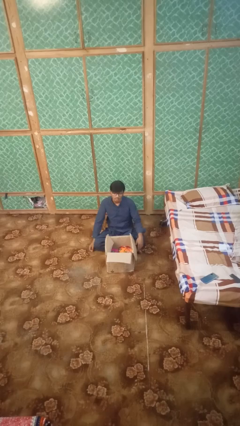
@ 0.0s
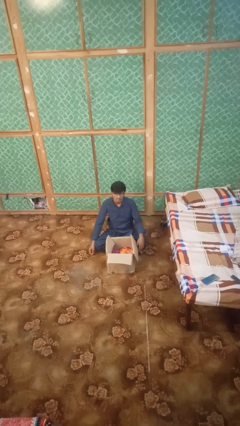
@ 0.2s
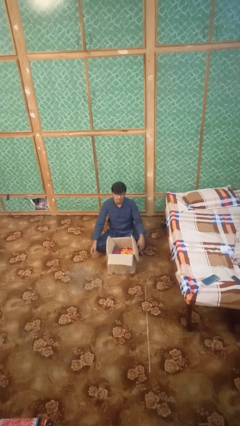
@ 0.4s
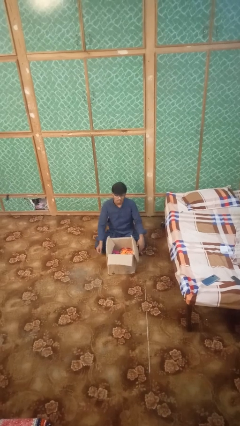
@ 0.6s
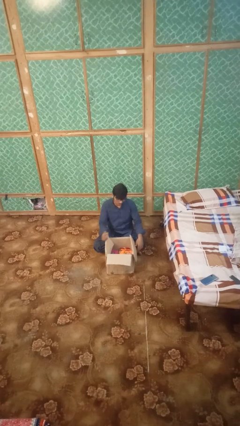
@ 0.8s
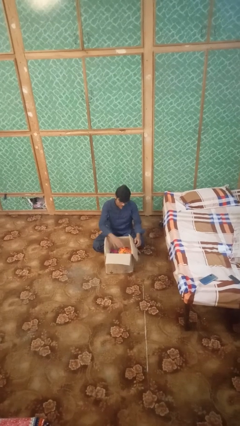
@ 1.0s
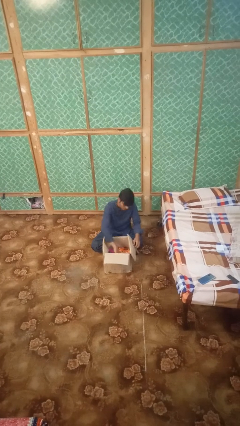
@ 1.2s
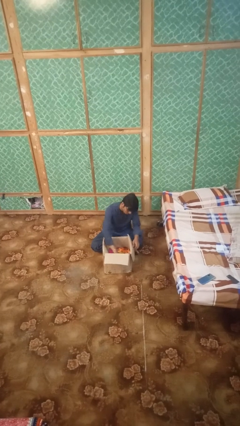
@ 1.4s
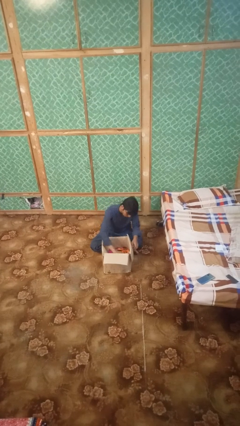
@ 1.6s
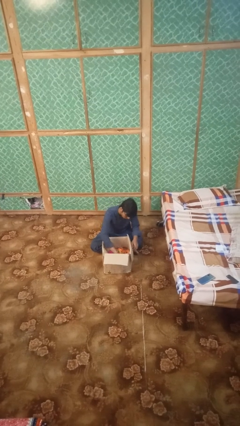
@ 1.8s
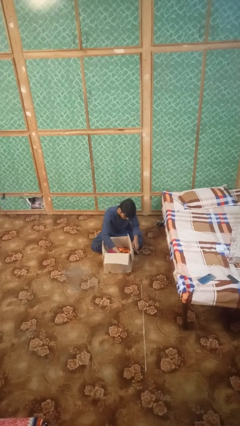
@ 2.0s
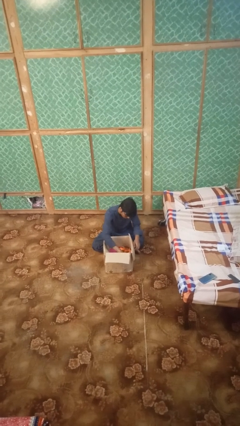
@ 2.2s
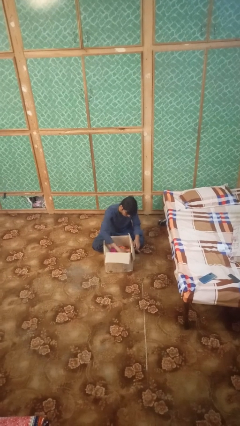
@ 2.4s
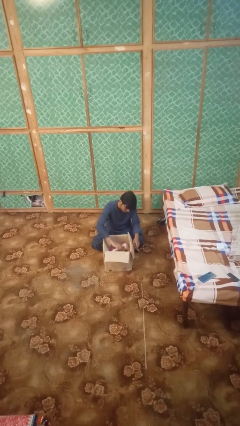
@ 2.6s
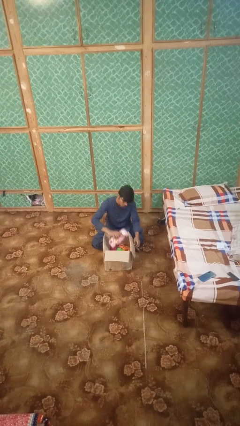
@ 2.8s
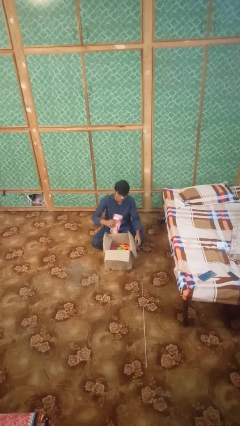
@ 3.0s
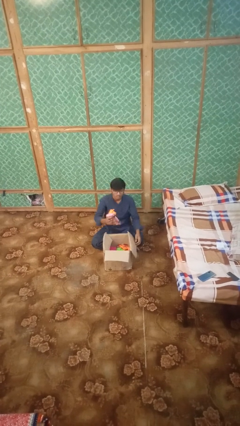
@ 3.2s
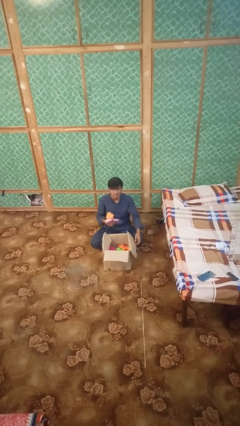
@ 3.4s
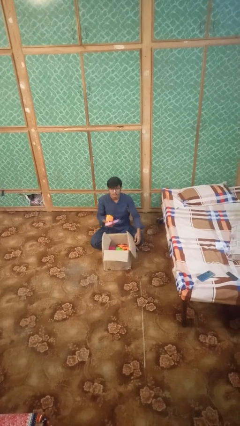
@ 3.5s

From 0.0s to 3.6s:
person takes object from box

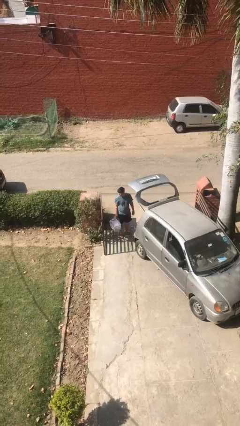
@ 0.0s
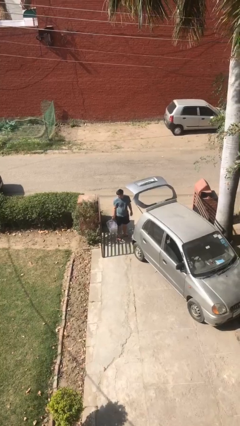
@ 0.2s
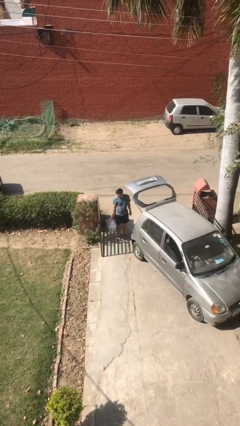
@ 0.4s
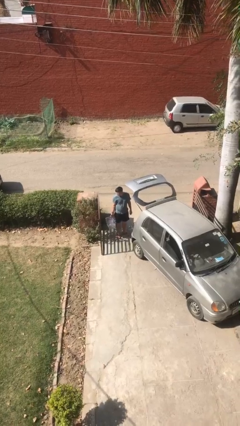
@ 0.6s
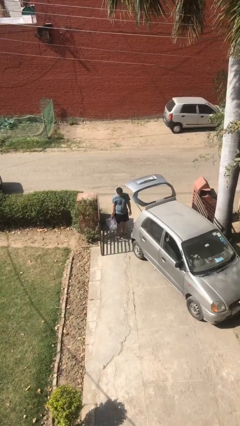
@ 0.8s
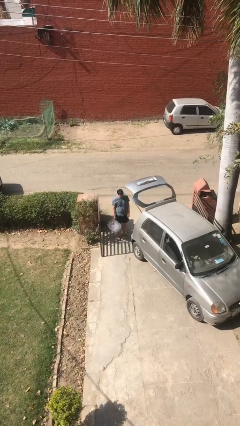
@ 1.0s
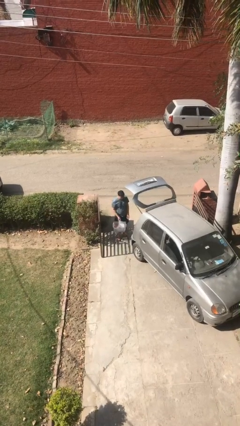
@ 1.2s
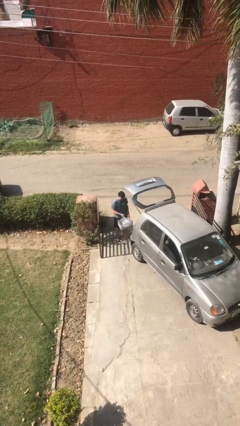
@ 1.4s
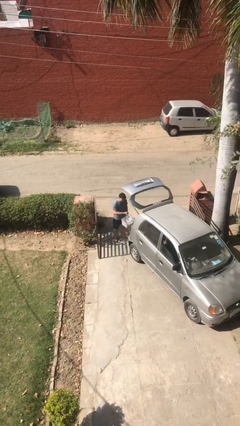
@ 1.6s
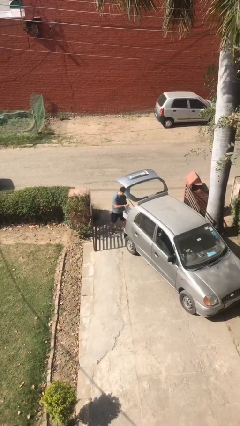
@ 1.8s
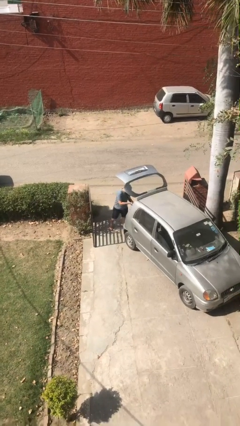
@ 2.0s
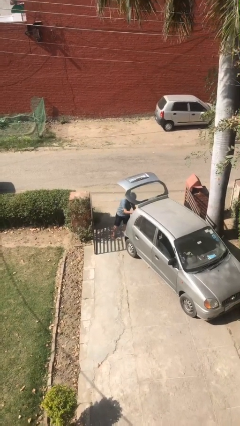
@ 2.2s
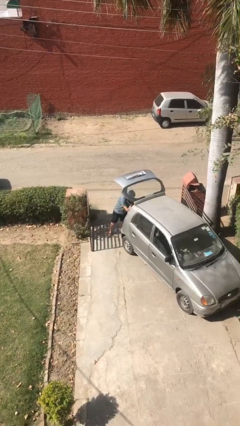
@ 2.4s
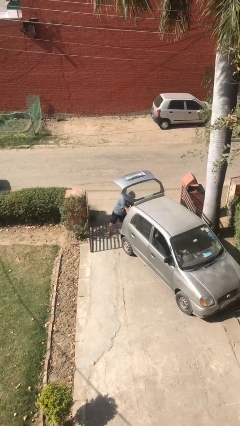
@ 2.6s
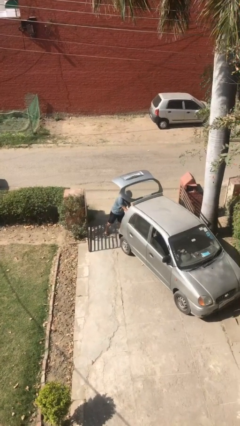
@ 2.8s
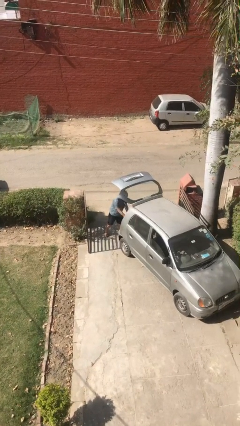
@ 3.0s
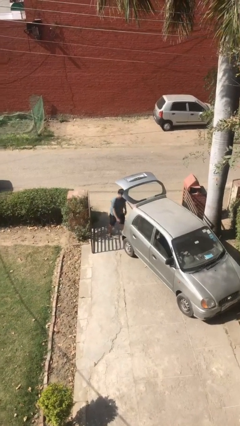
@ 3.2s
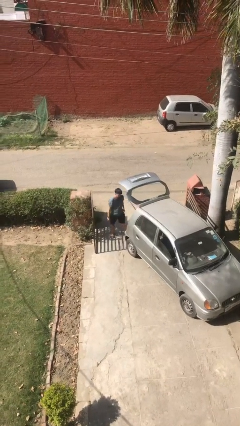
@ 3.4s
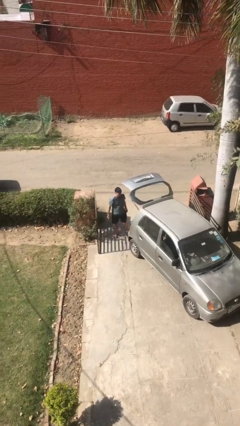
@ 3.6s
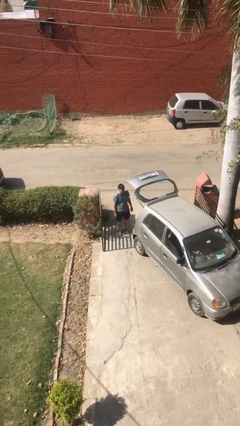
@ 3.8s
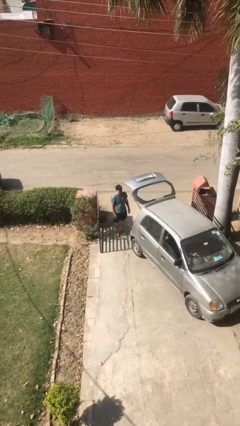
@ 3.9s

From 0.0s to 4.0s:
person loads car

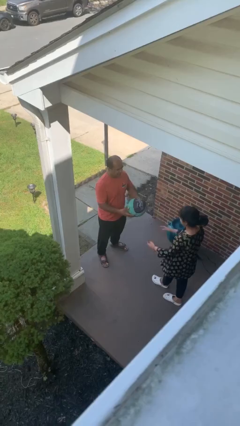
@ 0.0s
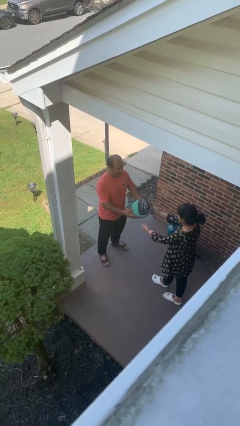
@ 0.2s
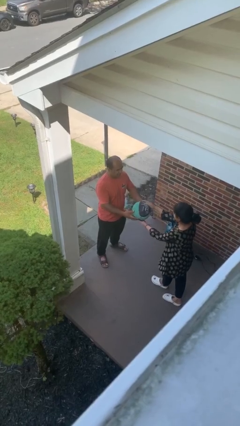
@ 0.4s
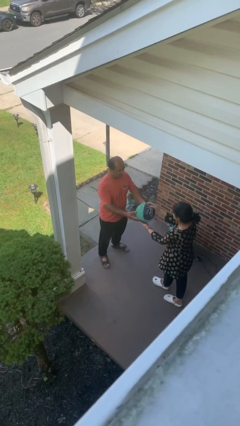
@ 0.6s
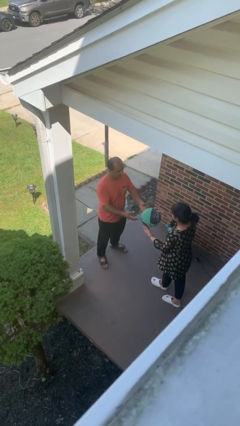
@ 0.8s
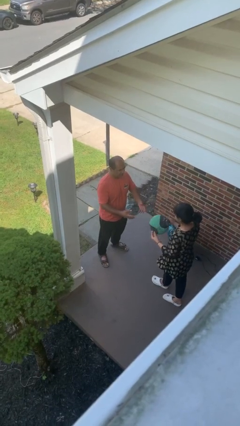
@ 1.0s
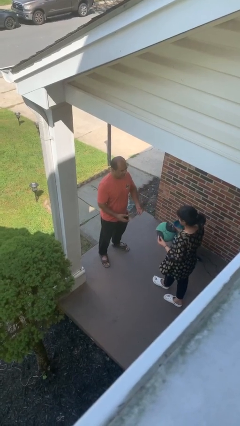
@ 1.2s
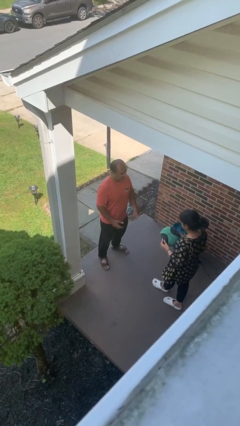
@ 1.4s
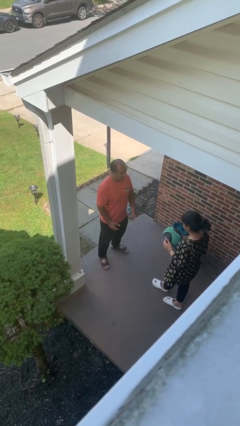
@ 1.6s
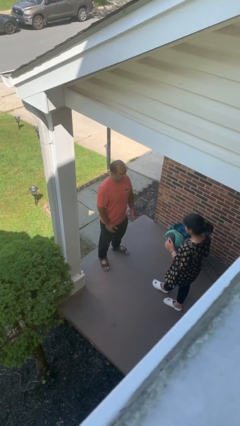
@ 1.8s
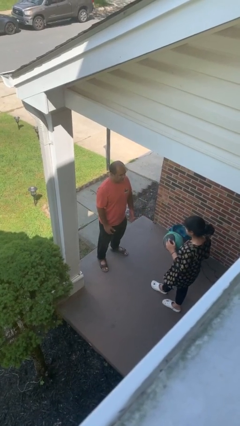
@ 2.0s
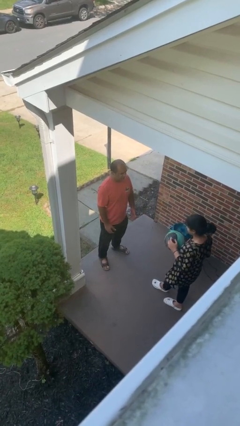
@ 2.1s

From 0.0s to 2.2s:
person transfers object to person

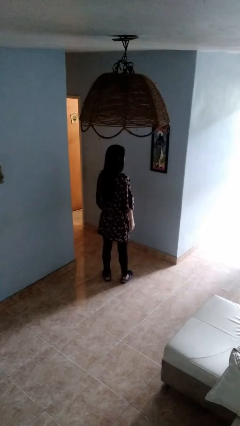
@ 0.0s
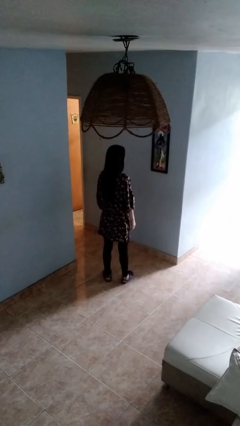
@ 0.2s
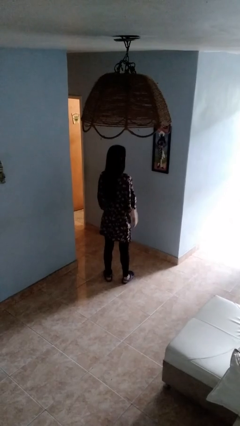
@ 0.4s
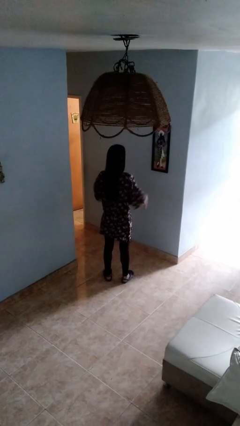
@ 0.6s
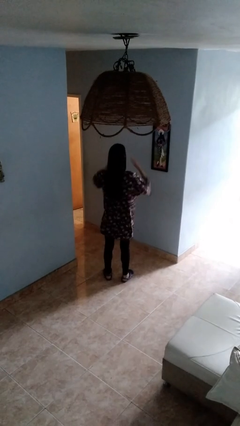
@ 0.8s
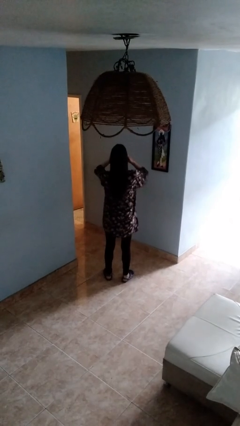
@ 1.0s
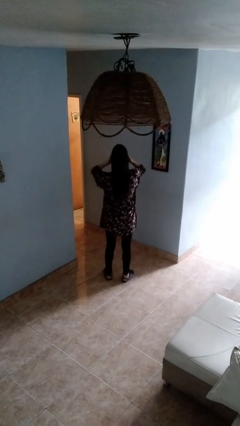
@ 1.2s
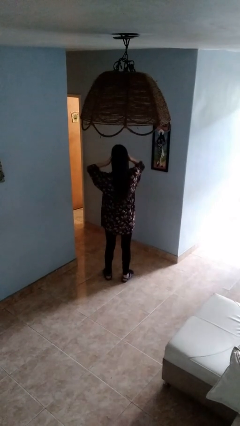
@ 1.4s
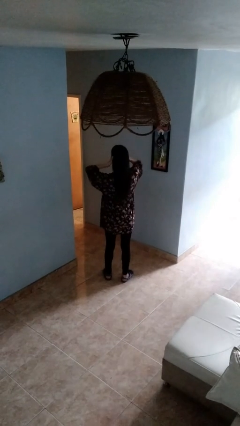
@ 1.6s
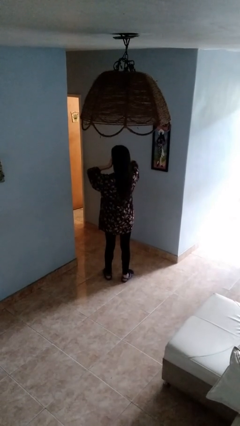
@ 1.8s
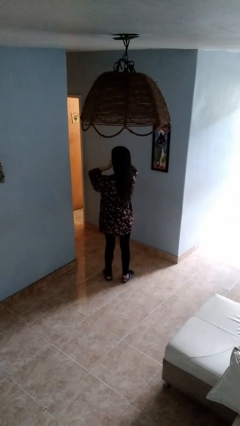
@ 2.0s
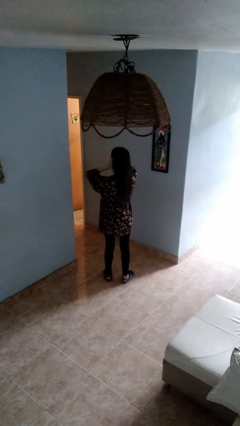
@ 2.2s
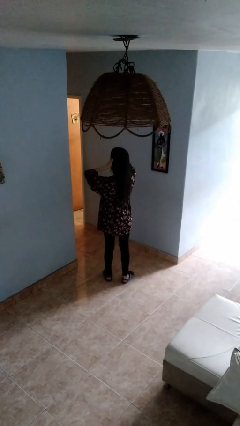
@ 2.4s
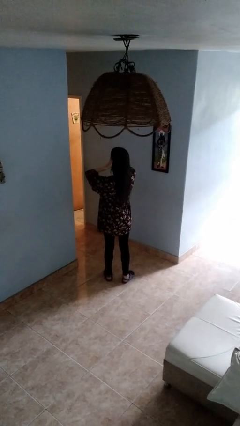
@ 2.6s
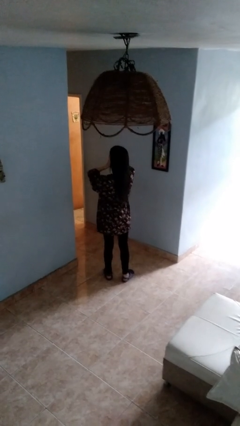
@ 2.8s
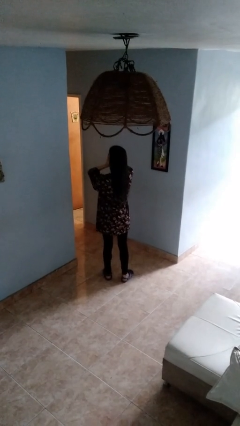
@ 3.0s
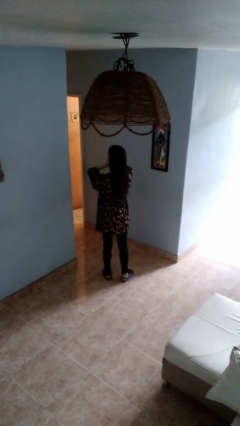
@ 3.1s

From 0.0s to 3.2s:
person rubs eyes

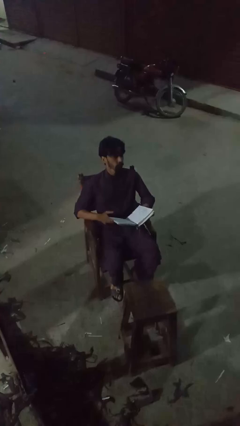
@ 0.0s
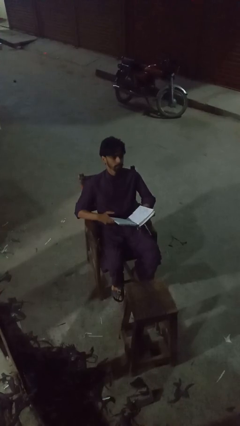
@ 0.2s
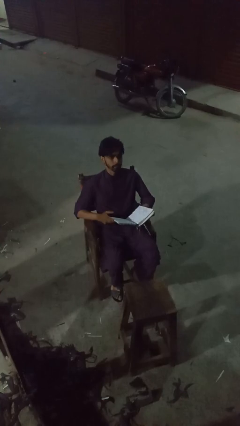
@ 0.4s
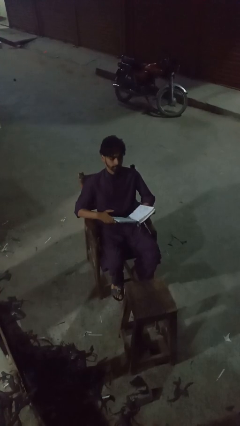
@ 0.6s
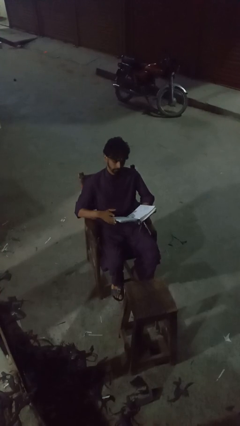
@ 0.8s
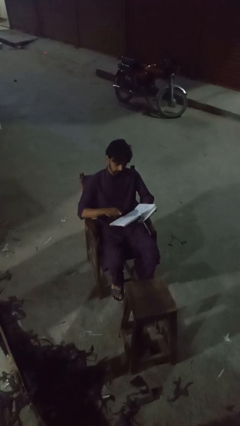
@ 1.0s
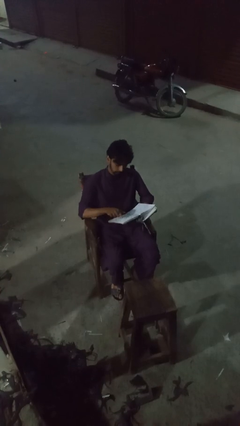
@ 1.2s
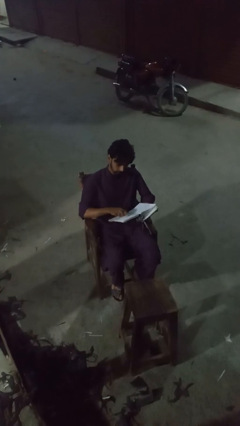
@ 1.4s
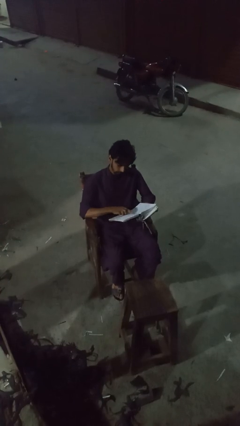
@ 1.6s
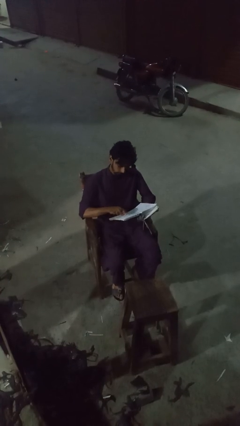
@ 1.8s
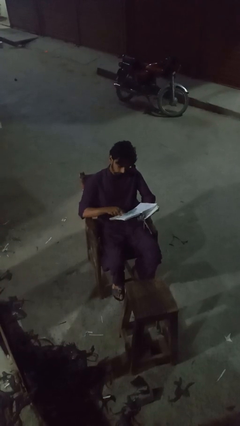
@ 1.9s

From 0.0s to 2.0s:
person reads book

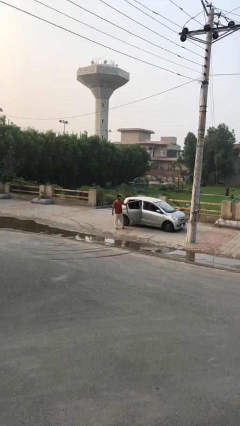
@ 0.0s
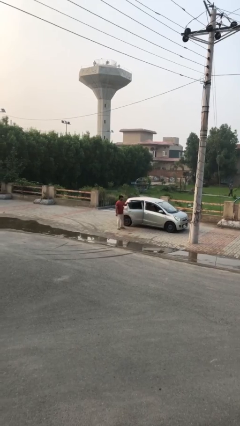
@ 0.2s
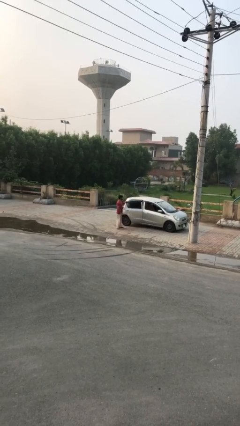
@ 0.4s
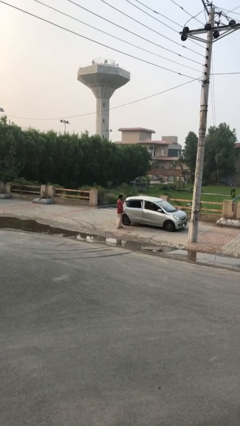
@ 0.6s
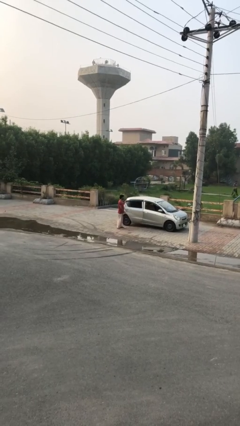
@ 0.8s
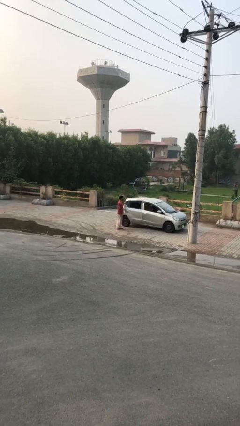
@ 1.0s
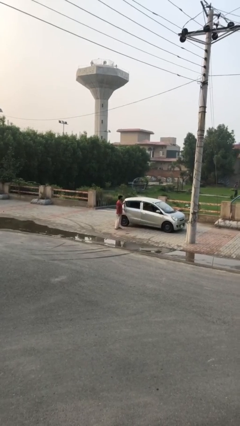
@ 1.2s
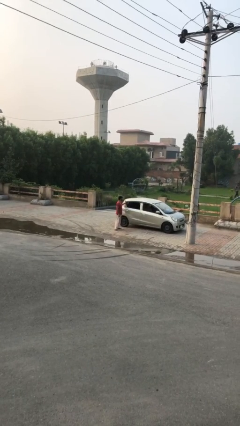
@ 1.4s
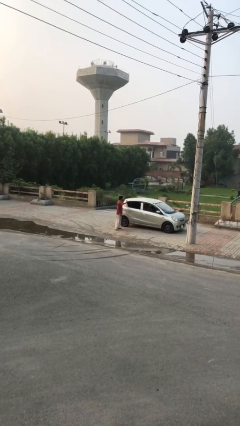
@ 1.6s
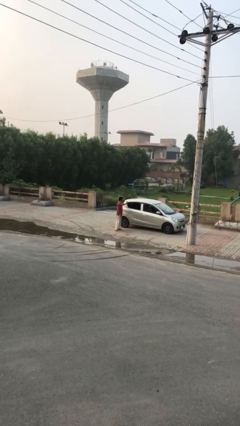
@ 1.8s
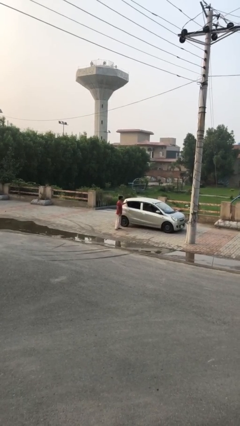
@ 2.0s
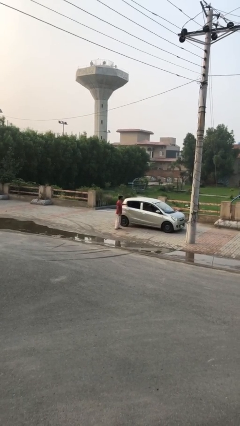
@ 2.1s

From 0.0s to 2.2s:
person closes car door
